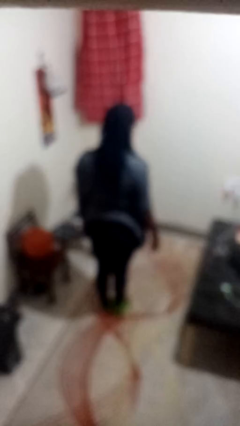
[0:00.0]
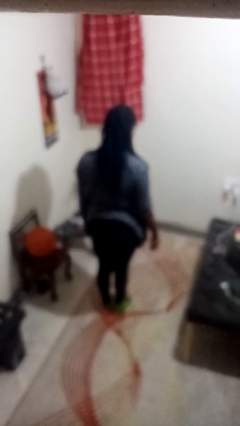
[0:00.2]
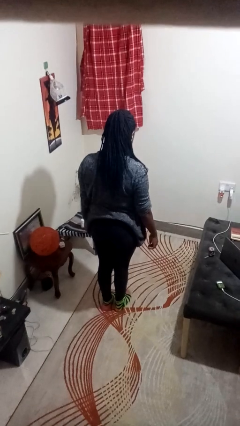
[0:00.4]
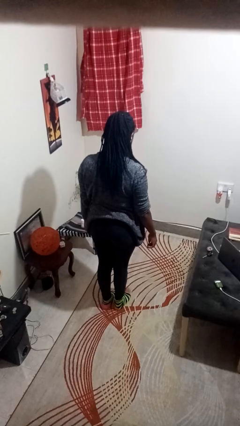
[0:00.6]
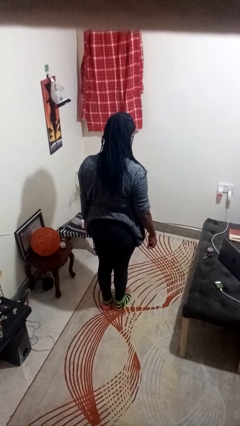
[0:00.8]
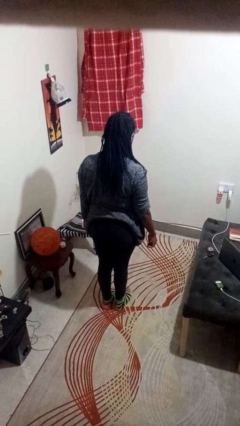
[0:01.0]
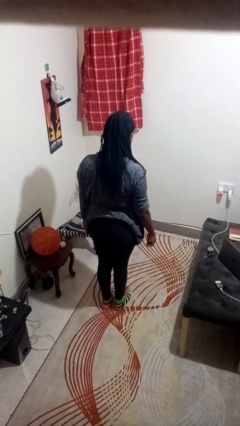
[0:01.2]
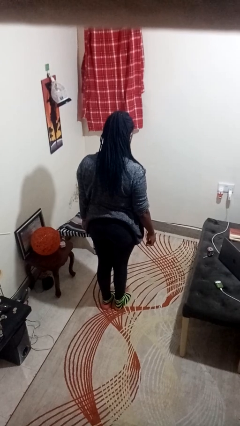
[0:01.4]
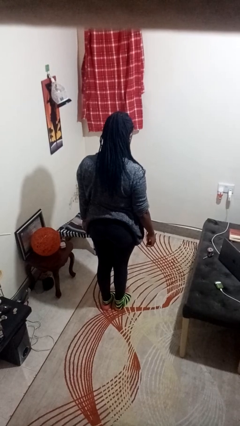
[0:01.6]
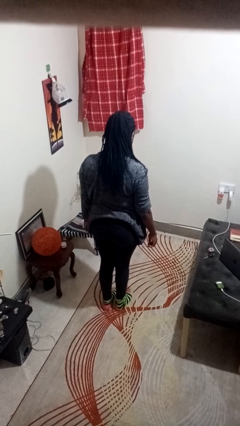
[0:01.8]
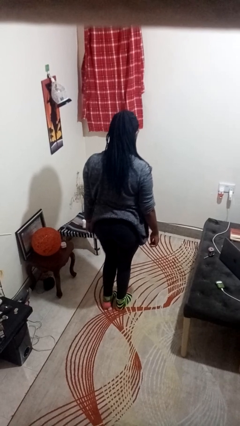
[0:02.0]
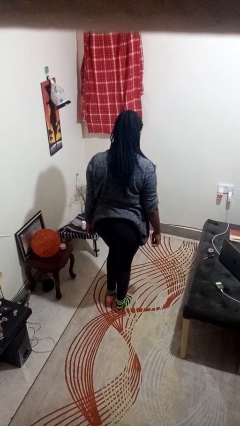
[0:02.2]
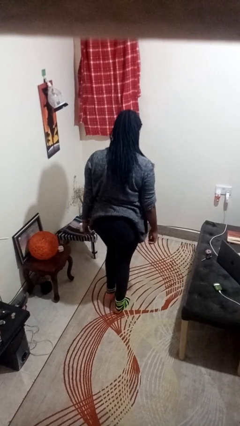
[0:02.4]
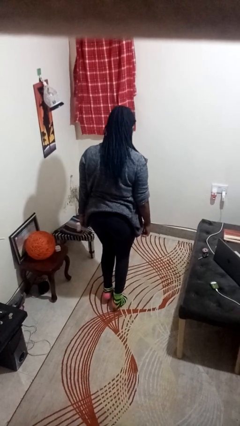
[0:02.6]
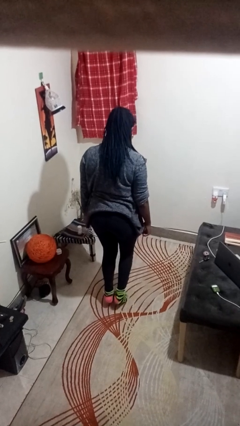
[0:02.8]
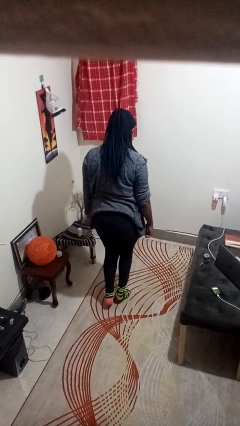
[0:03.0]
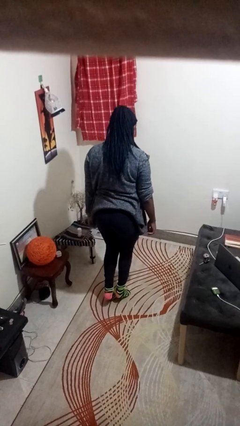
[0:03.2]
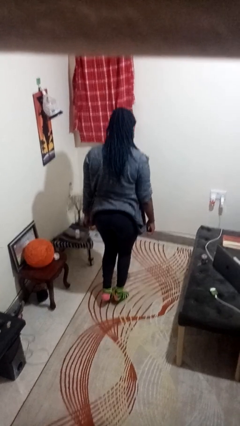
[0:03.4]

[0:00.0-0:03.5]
person walks tiptoe

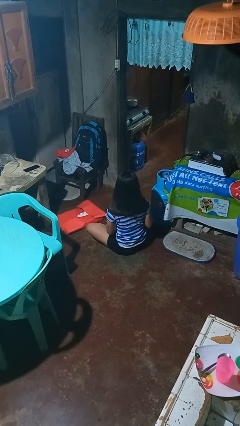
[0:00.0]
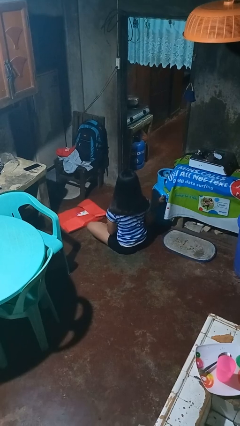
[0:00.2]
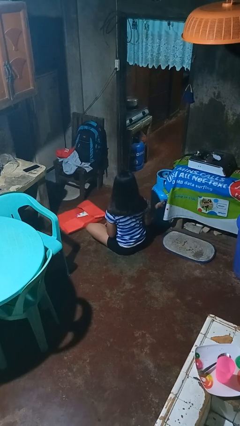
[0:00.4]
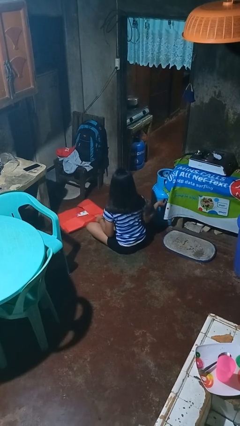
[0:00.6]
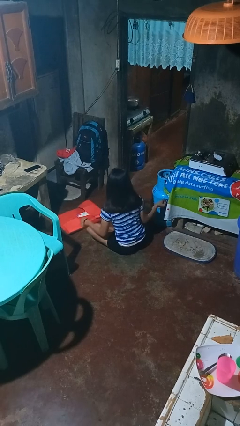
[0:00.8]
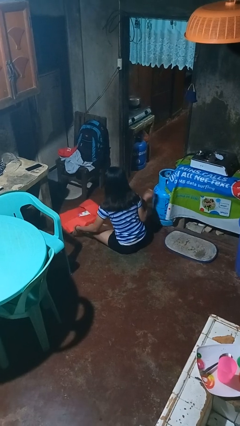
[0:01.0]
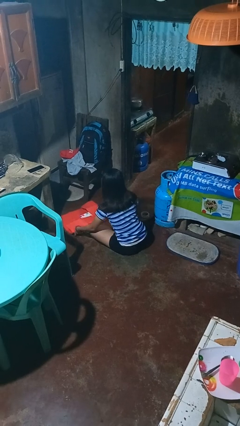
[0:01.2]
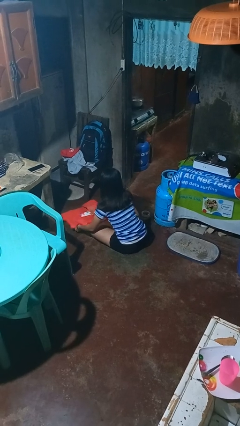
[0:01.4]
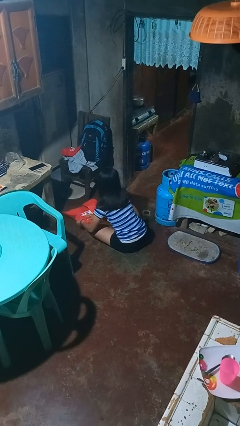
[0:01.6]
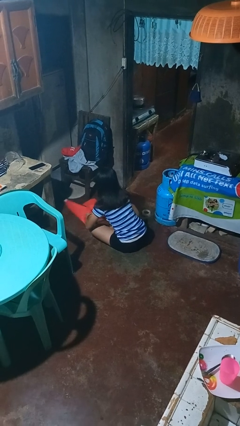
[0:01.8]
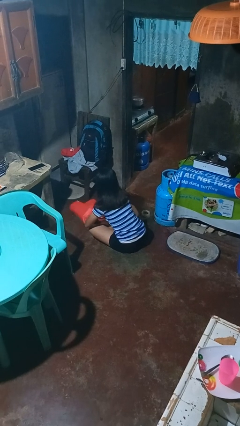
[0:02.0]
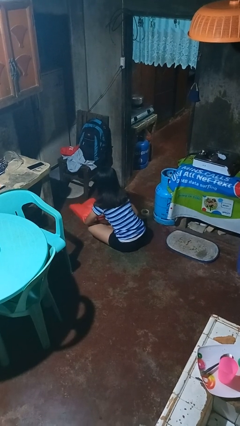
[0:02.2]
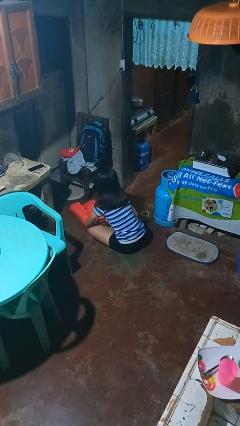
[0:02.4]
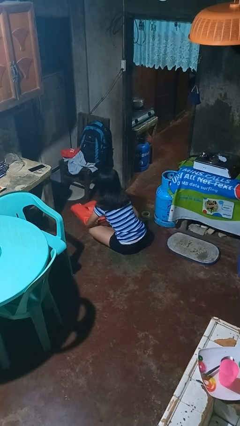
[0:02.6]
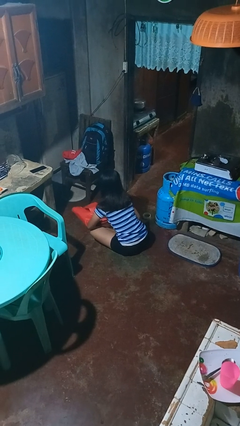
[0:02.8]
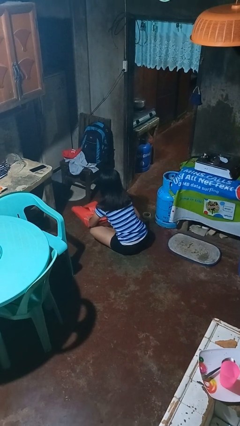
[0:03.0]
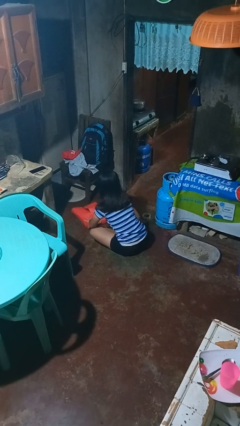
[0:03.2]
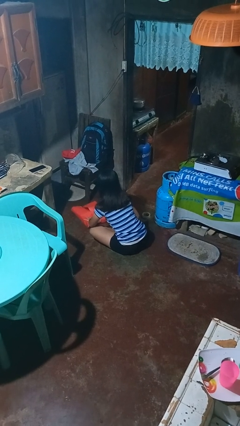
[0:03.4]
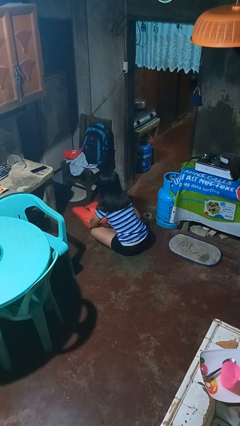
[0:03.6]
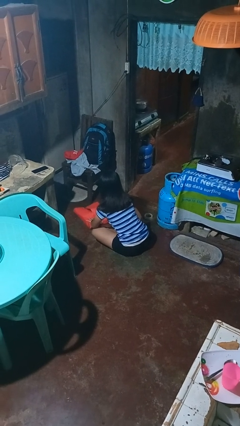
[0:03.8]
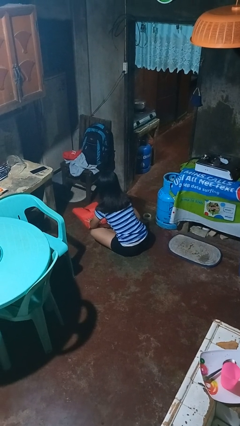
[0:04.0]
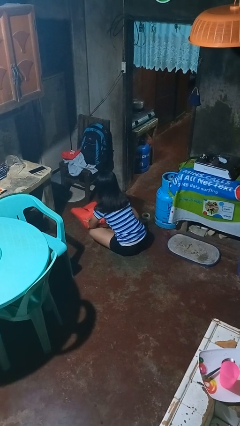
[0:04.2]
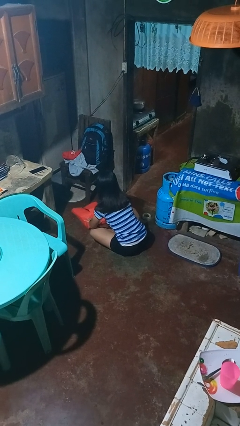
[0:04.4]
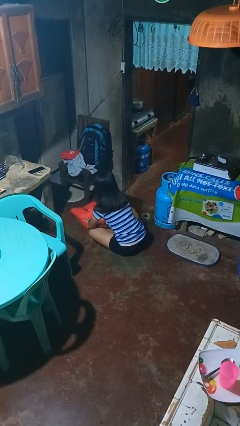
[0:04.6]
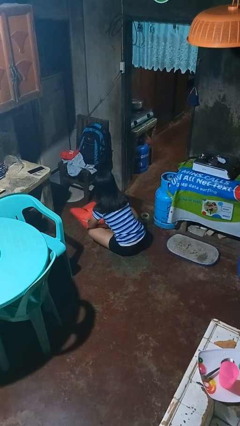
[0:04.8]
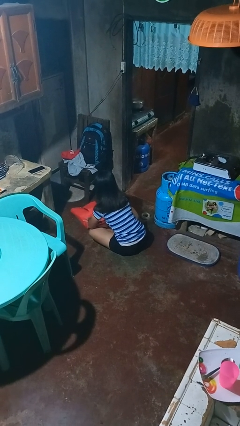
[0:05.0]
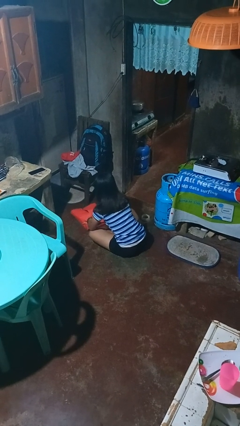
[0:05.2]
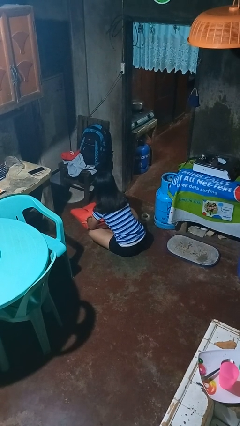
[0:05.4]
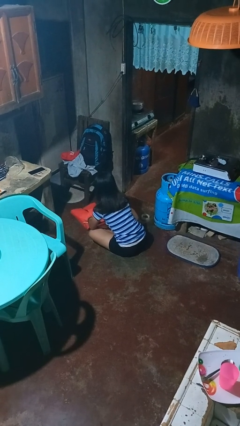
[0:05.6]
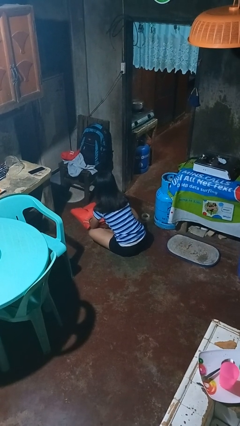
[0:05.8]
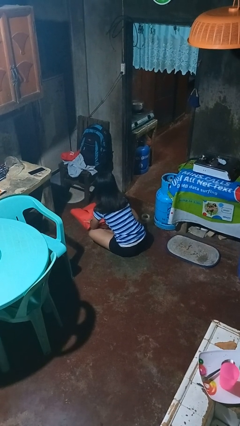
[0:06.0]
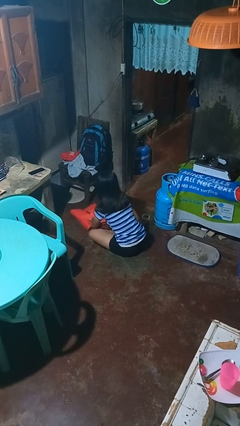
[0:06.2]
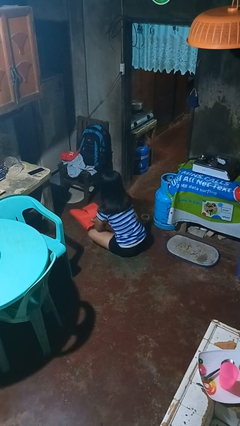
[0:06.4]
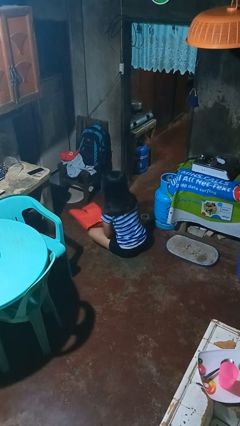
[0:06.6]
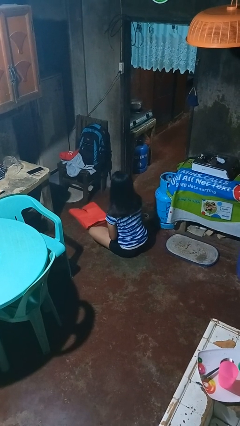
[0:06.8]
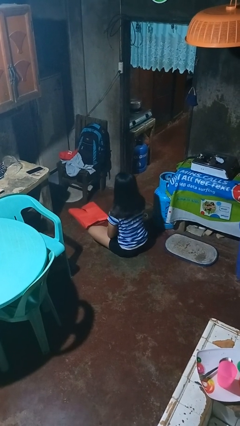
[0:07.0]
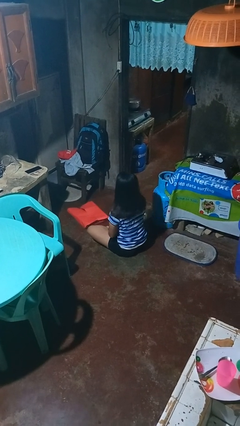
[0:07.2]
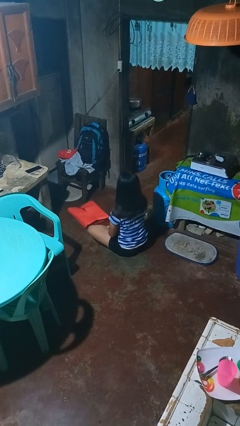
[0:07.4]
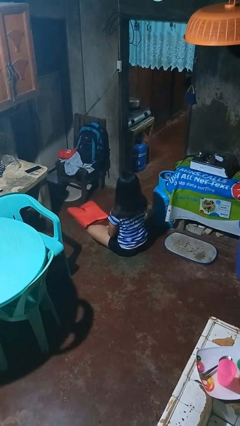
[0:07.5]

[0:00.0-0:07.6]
person wraps box

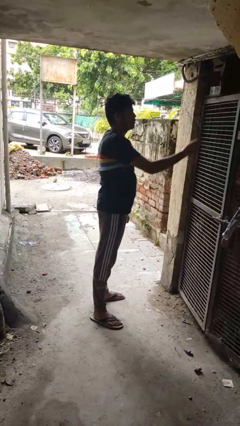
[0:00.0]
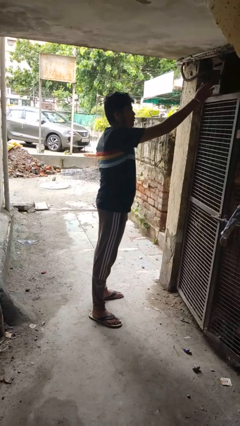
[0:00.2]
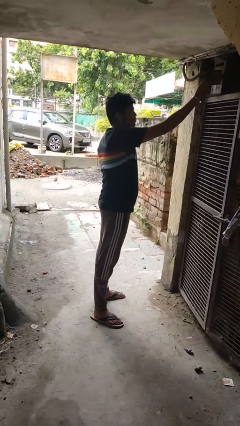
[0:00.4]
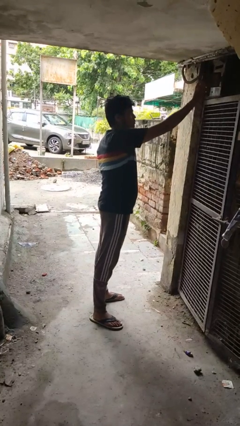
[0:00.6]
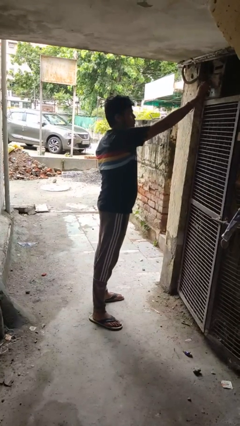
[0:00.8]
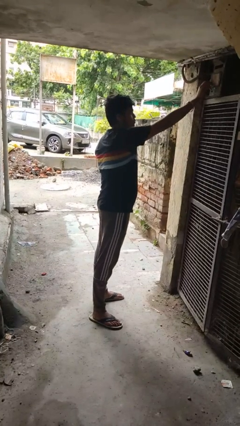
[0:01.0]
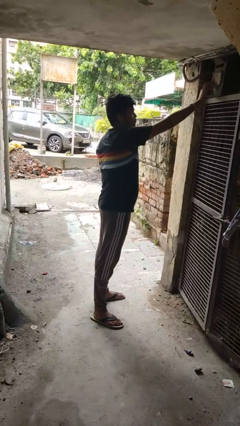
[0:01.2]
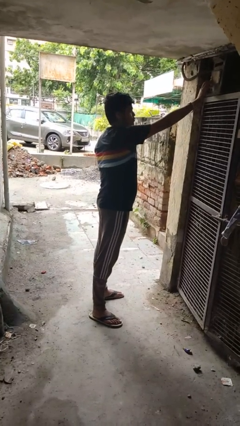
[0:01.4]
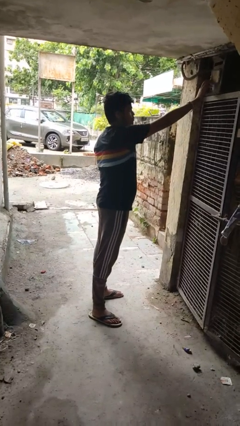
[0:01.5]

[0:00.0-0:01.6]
person closes mailbox

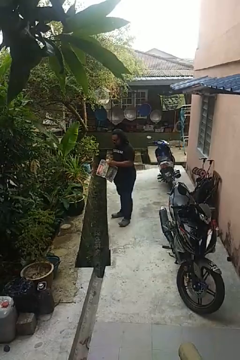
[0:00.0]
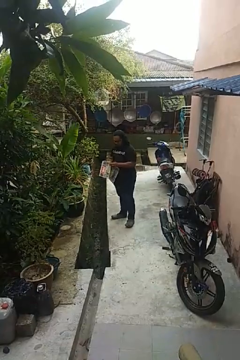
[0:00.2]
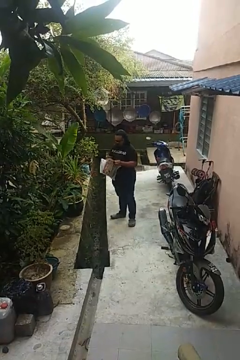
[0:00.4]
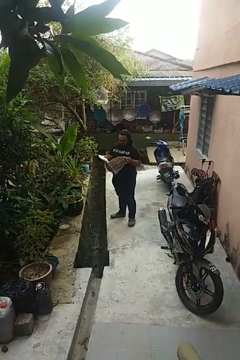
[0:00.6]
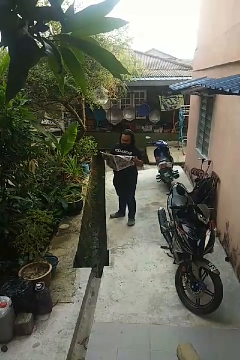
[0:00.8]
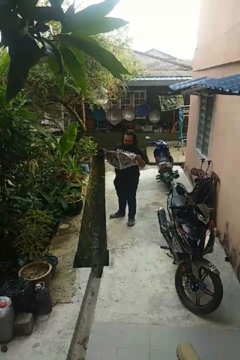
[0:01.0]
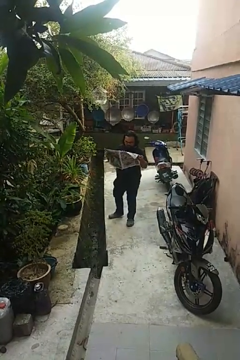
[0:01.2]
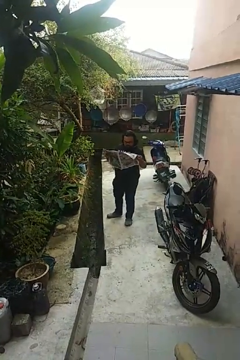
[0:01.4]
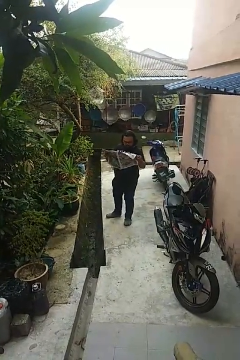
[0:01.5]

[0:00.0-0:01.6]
person reads newspaper

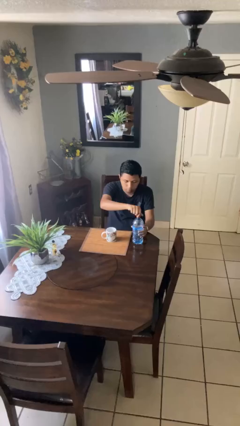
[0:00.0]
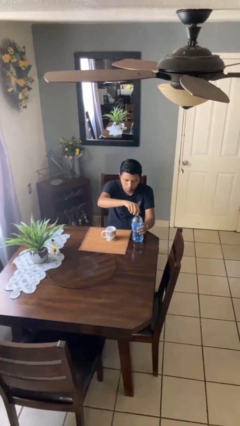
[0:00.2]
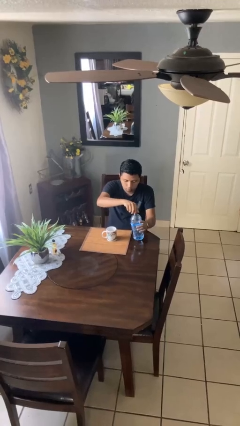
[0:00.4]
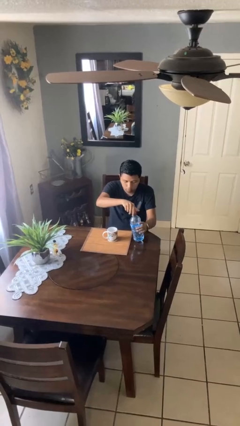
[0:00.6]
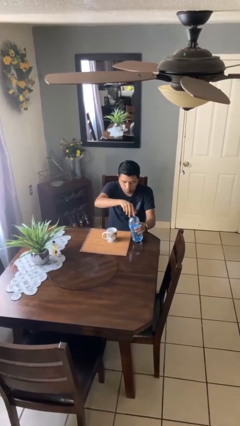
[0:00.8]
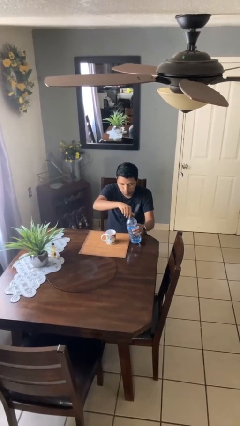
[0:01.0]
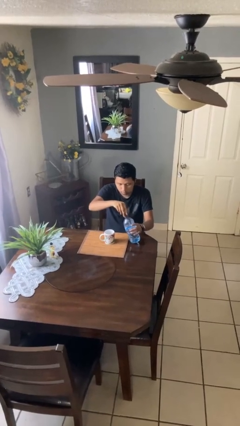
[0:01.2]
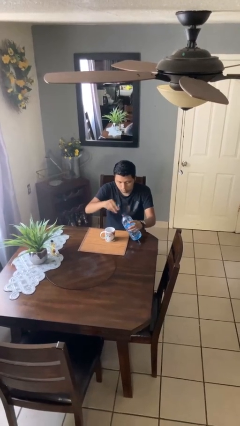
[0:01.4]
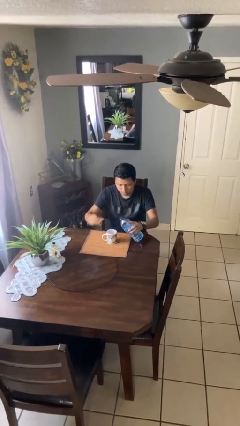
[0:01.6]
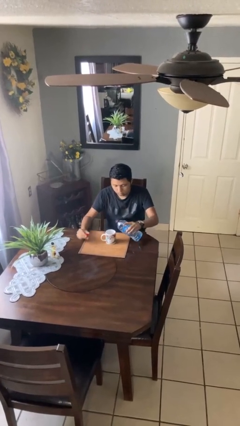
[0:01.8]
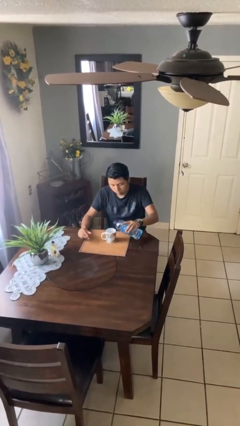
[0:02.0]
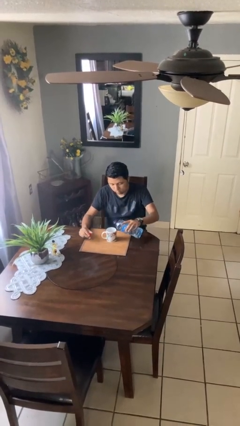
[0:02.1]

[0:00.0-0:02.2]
person unscrews lid from bottle

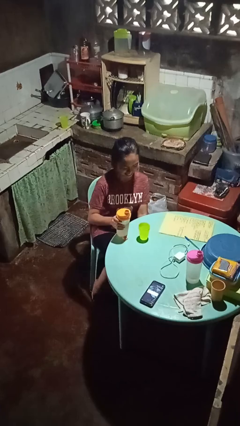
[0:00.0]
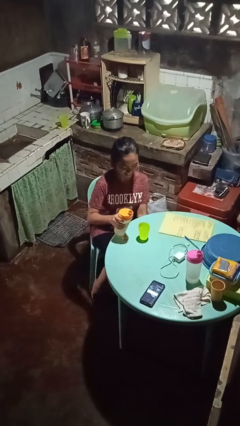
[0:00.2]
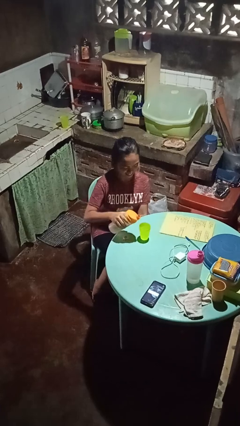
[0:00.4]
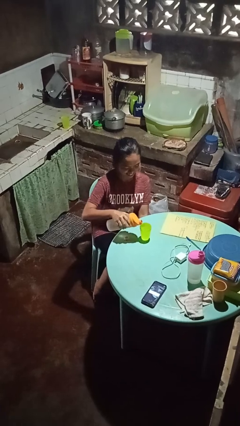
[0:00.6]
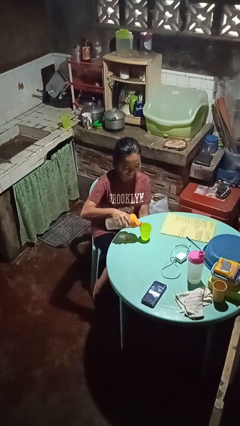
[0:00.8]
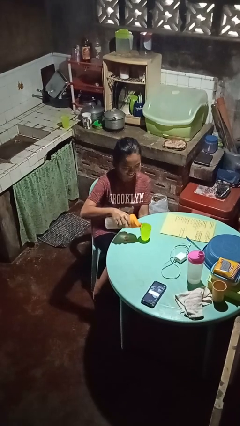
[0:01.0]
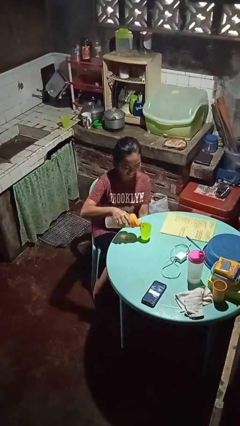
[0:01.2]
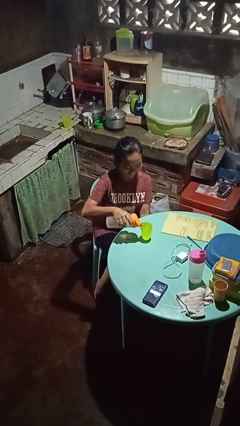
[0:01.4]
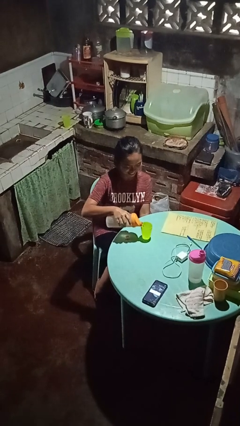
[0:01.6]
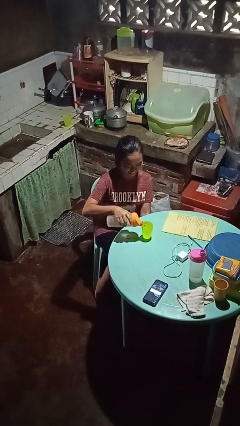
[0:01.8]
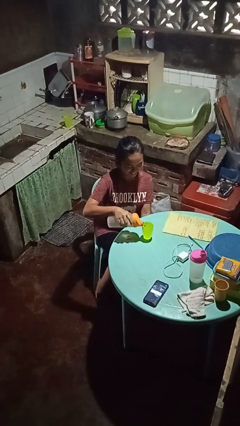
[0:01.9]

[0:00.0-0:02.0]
person pours liquid into cup
